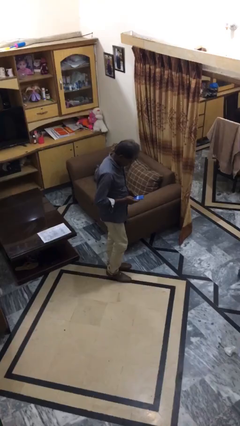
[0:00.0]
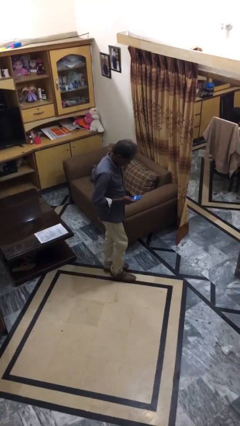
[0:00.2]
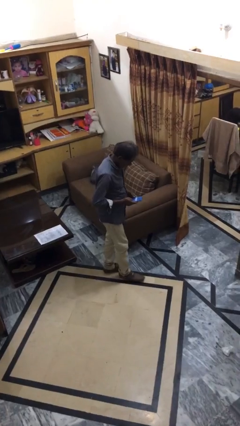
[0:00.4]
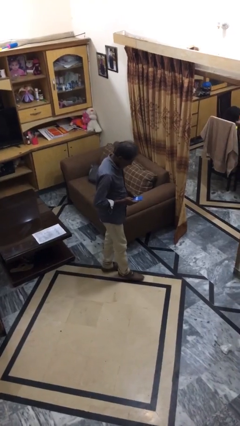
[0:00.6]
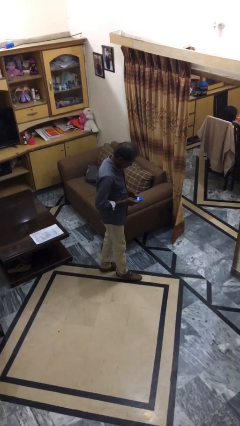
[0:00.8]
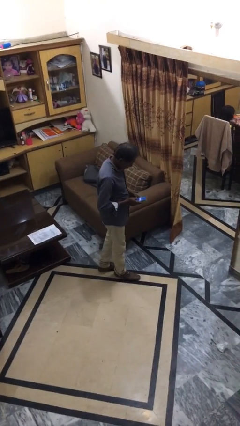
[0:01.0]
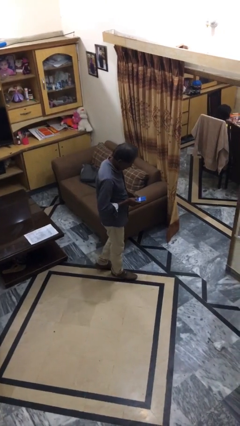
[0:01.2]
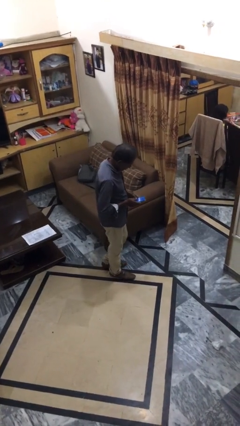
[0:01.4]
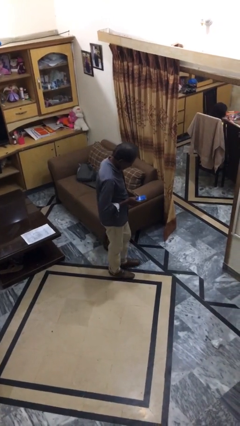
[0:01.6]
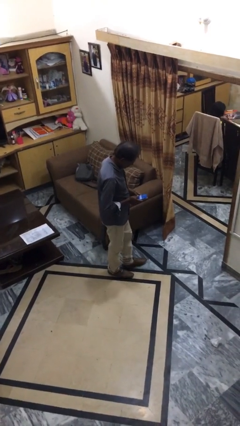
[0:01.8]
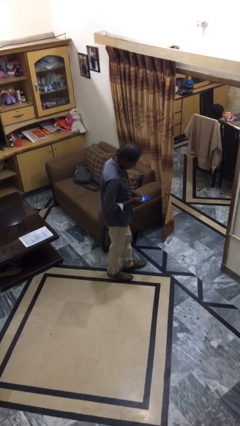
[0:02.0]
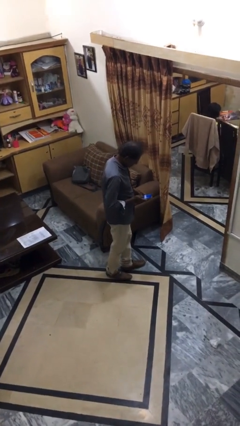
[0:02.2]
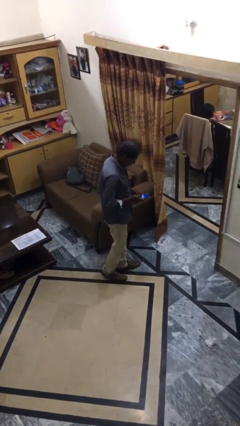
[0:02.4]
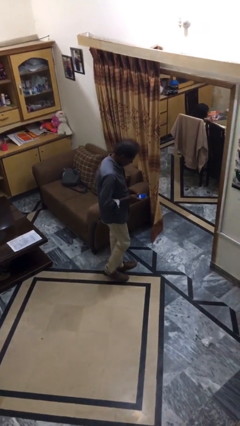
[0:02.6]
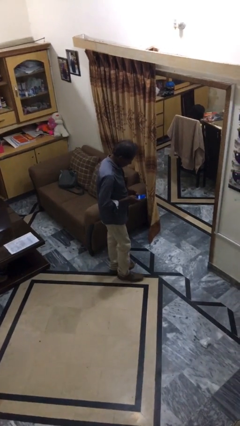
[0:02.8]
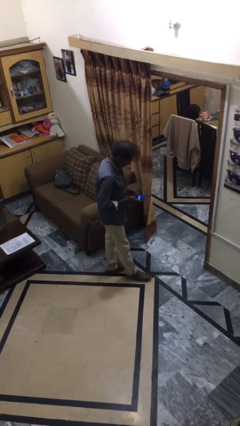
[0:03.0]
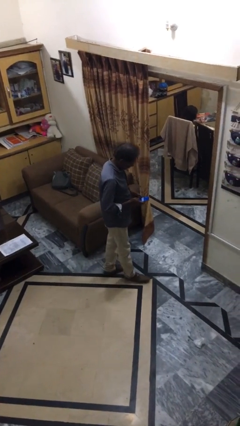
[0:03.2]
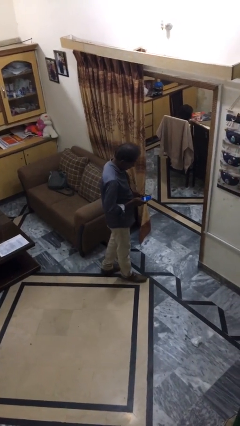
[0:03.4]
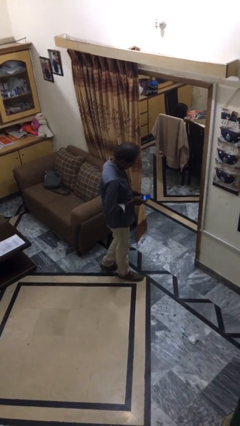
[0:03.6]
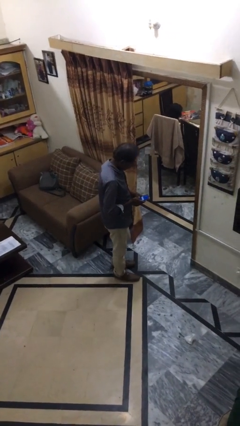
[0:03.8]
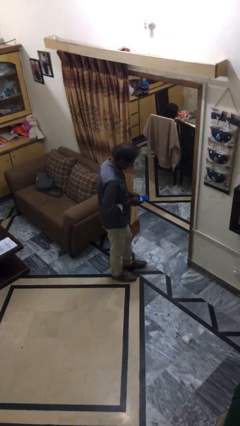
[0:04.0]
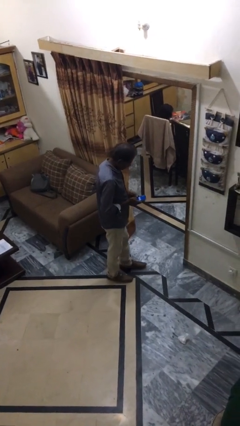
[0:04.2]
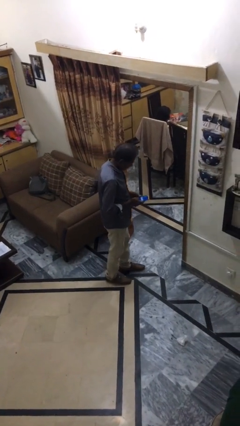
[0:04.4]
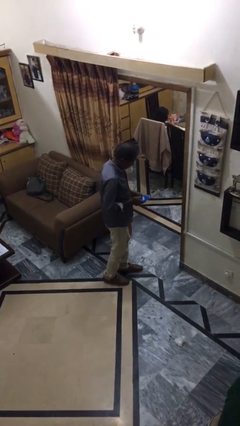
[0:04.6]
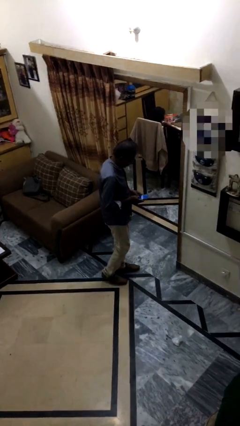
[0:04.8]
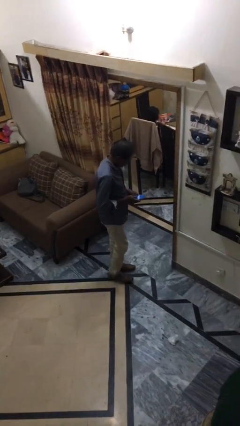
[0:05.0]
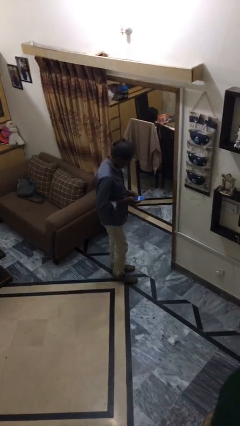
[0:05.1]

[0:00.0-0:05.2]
person texts on phone

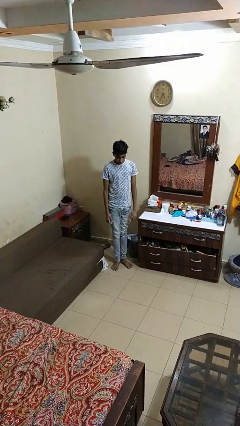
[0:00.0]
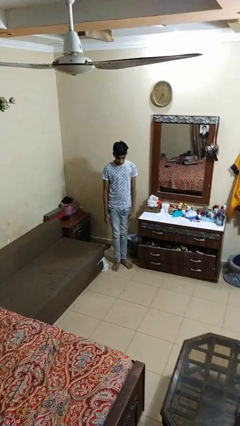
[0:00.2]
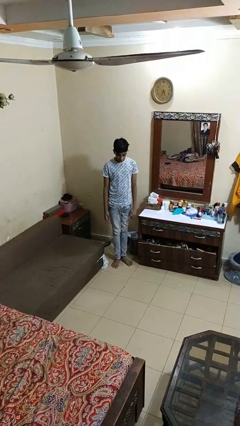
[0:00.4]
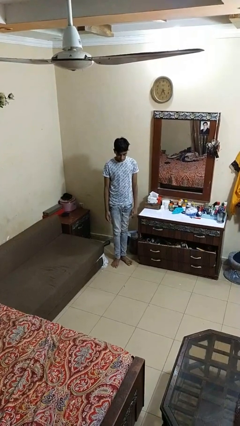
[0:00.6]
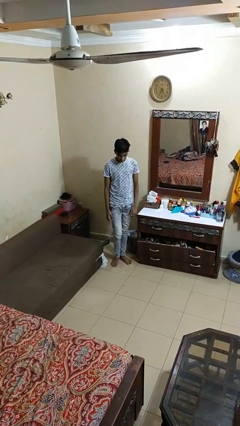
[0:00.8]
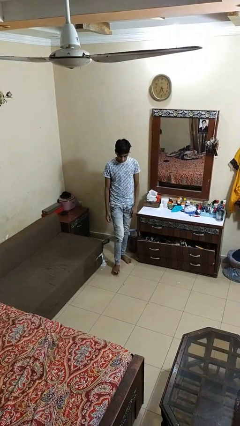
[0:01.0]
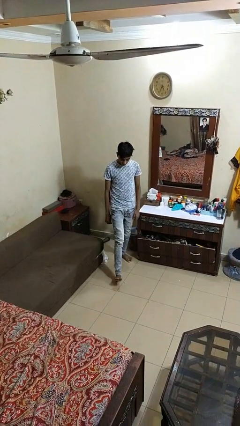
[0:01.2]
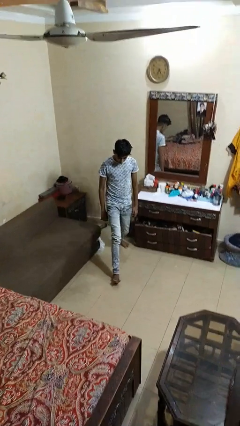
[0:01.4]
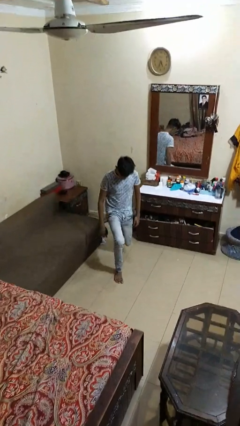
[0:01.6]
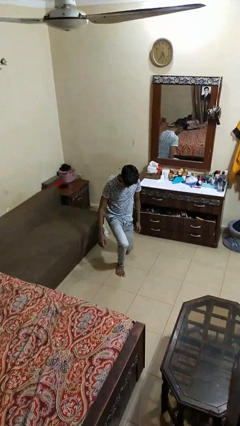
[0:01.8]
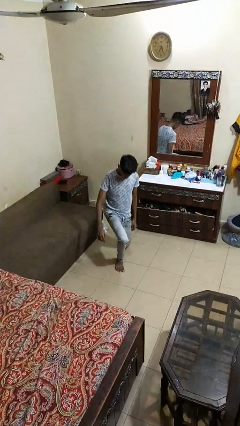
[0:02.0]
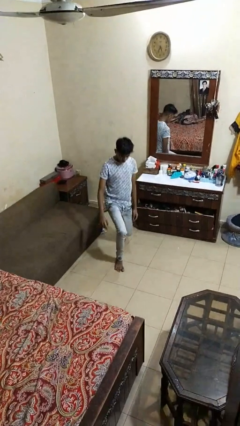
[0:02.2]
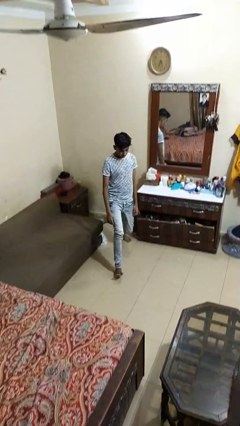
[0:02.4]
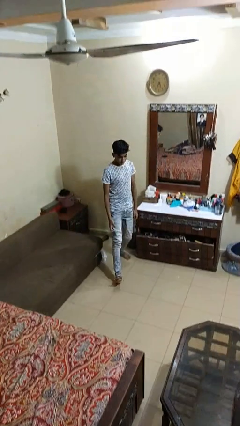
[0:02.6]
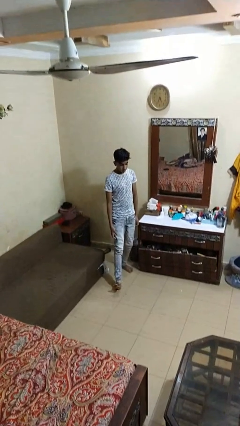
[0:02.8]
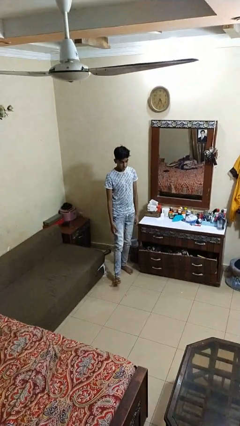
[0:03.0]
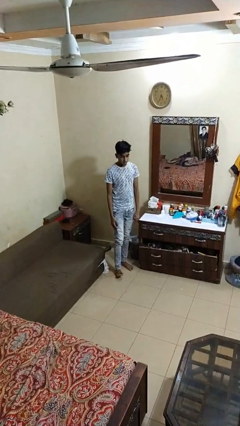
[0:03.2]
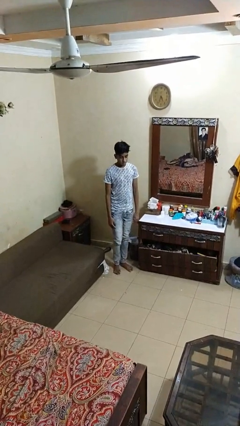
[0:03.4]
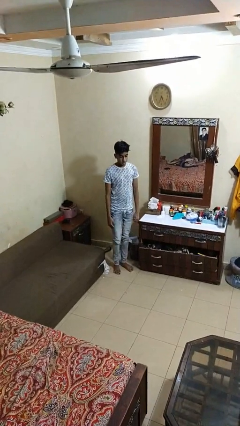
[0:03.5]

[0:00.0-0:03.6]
person exercises with lunges

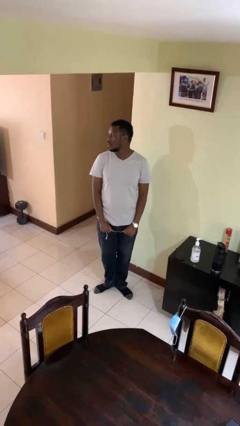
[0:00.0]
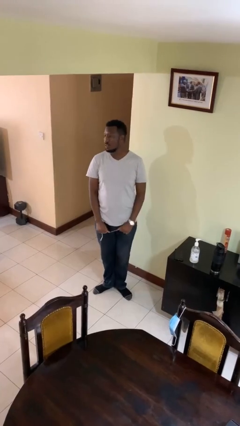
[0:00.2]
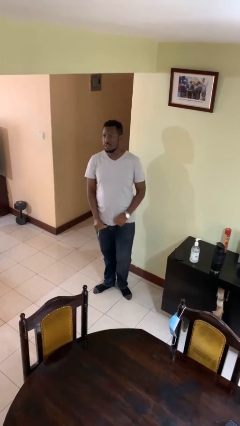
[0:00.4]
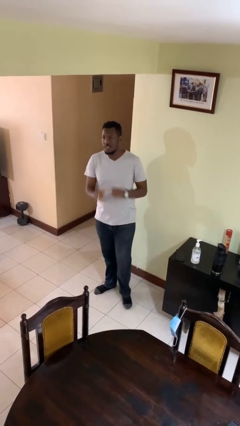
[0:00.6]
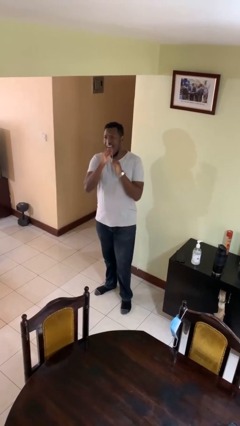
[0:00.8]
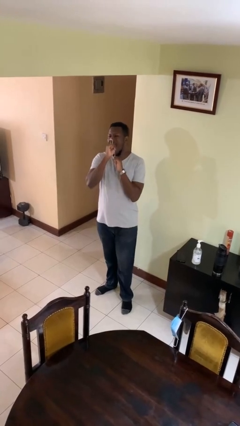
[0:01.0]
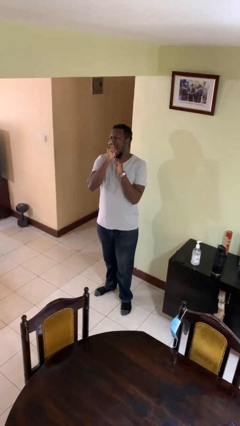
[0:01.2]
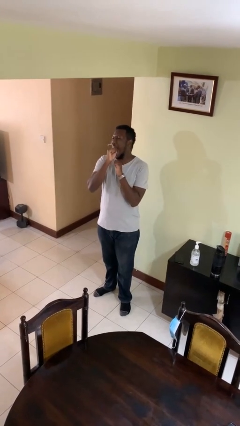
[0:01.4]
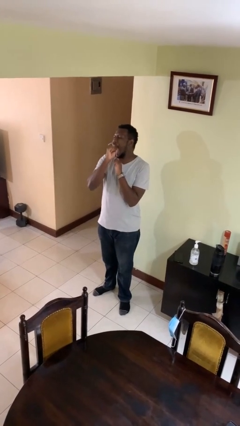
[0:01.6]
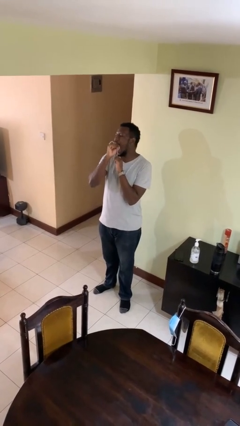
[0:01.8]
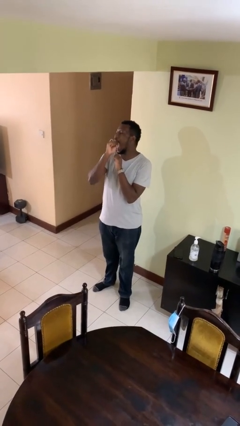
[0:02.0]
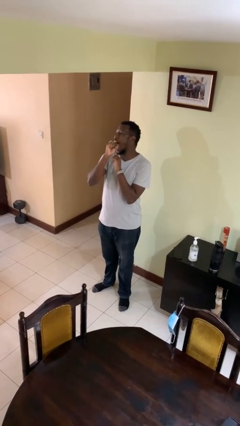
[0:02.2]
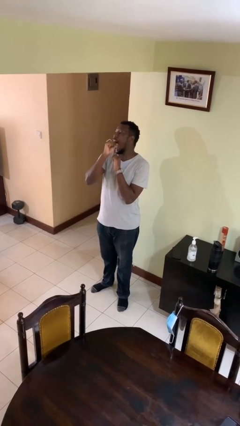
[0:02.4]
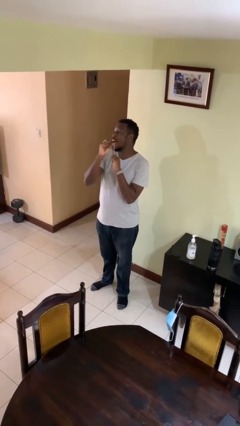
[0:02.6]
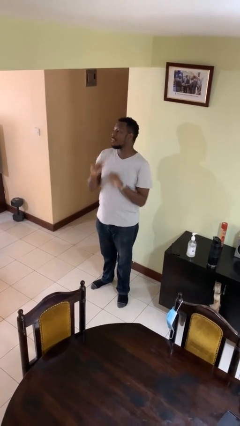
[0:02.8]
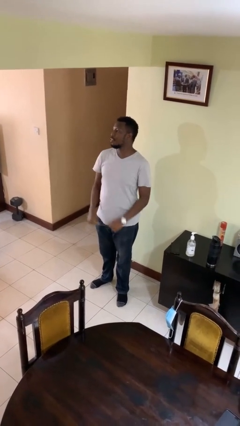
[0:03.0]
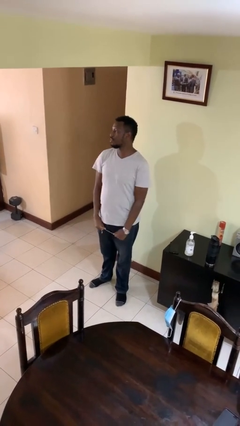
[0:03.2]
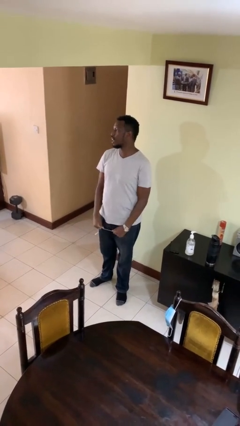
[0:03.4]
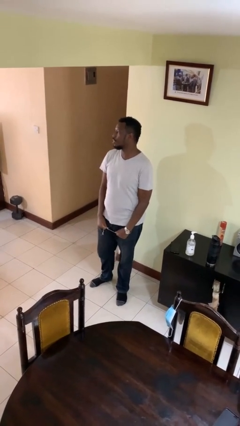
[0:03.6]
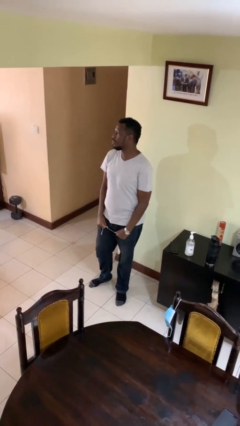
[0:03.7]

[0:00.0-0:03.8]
person flosses

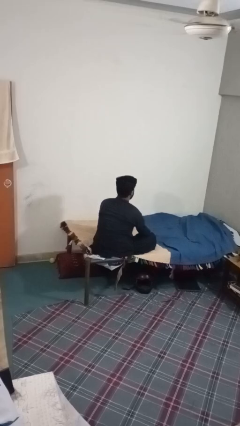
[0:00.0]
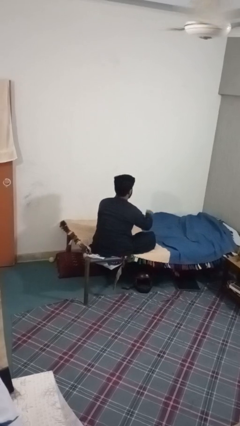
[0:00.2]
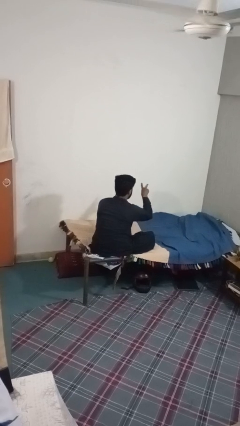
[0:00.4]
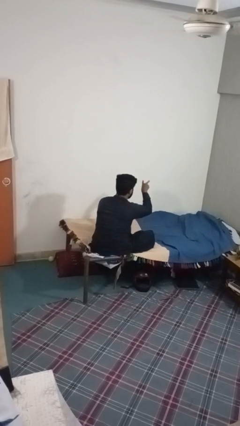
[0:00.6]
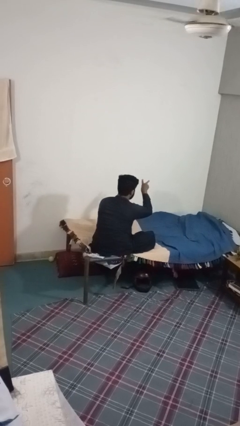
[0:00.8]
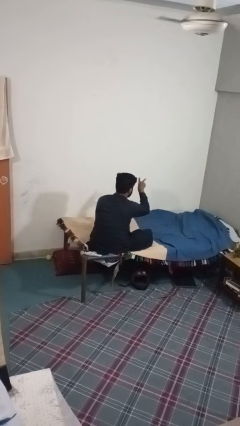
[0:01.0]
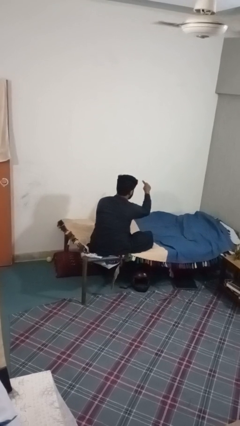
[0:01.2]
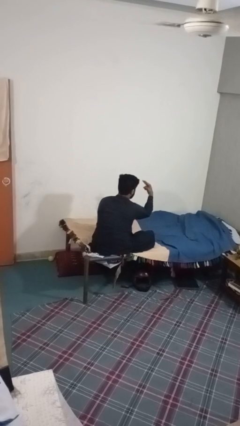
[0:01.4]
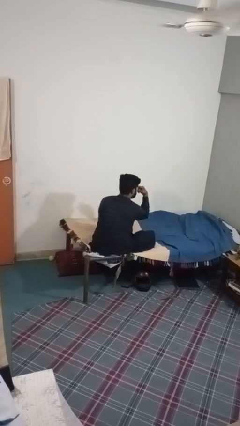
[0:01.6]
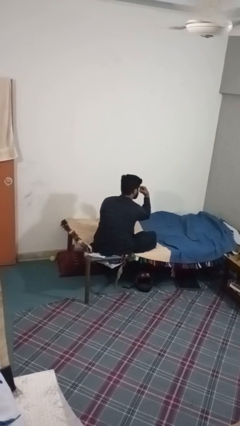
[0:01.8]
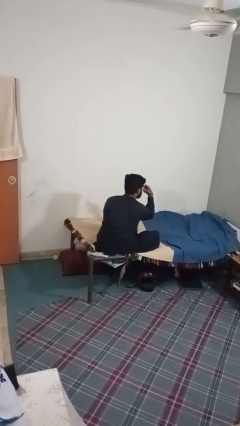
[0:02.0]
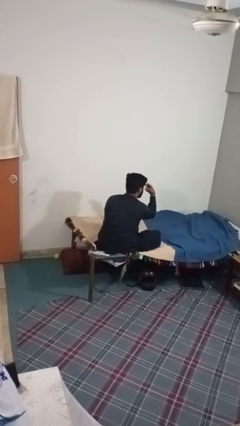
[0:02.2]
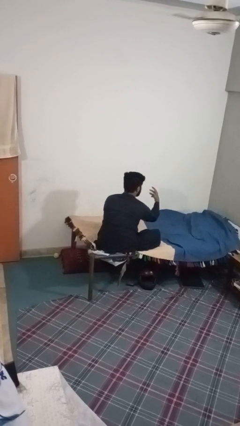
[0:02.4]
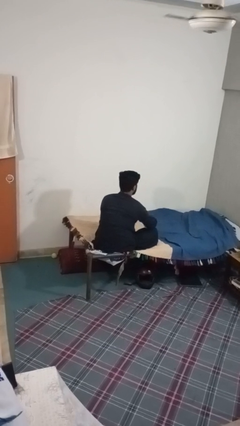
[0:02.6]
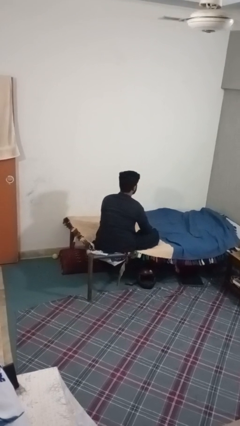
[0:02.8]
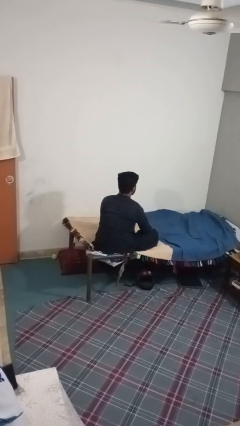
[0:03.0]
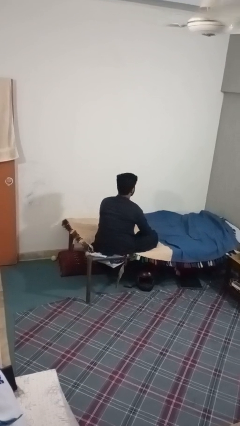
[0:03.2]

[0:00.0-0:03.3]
person gestures watch closely

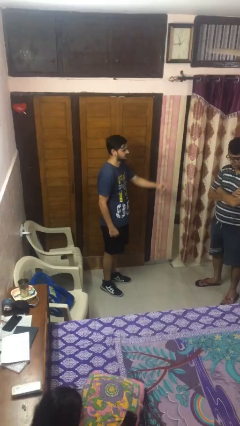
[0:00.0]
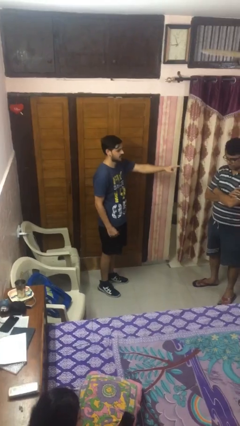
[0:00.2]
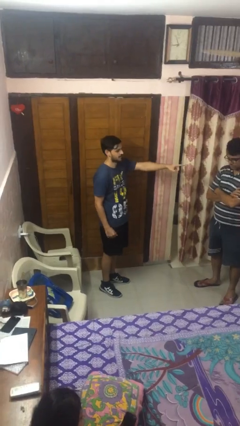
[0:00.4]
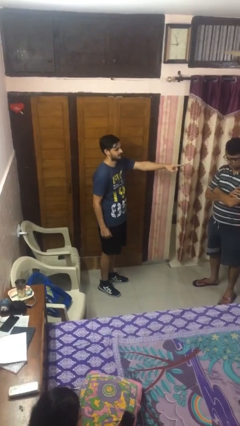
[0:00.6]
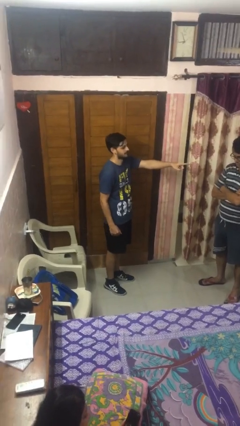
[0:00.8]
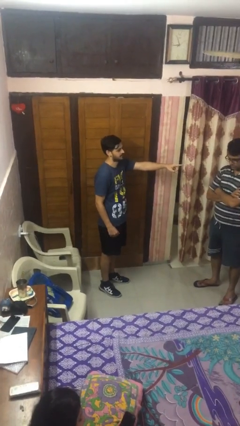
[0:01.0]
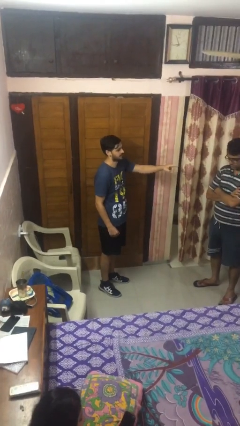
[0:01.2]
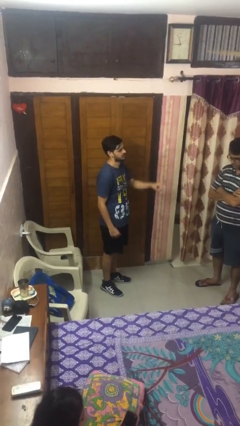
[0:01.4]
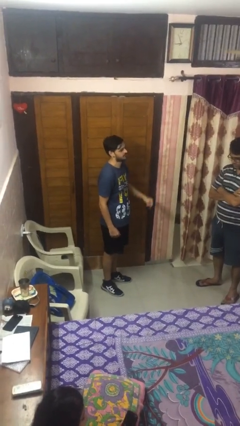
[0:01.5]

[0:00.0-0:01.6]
person points at person
